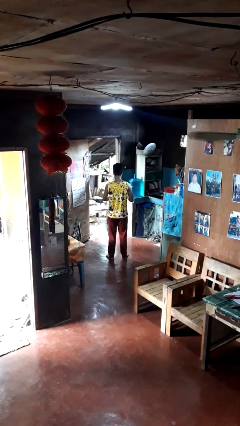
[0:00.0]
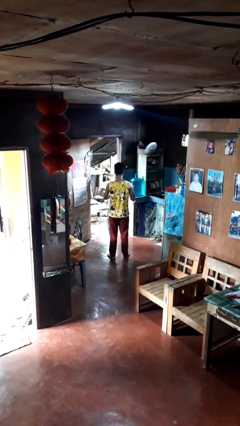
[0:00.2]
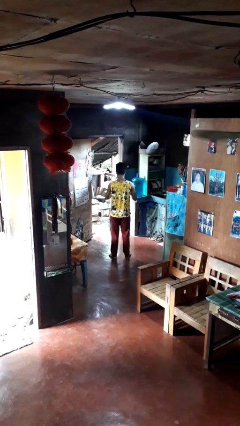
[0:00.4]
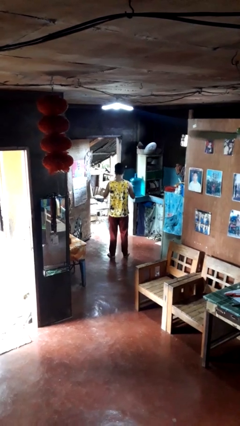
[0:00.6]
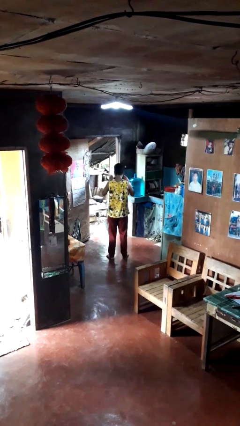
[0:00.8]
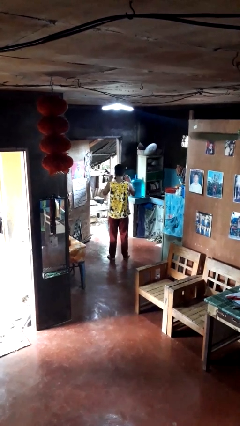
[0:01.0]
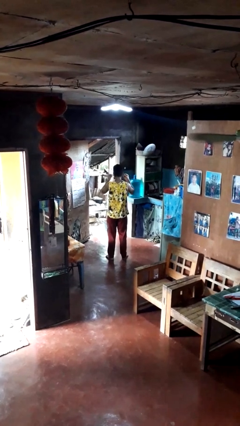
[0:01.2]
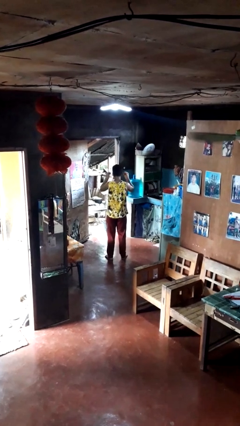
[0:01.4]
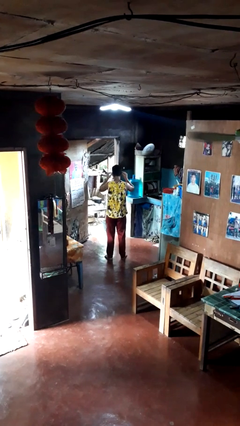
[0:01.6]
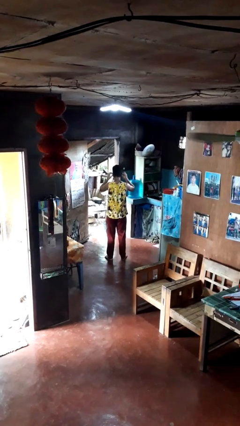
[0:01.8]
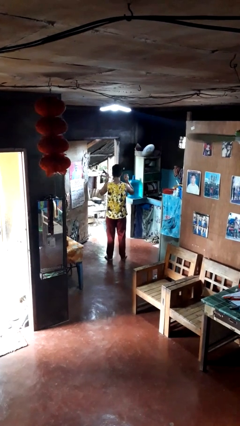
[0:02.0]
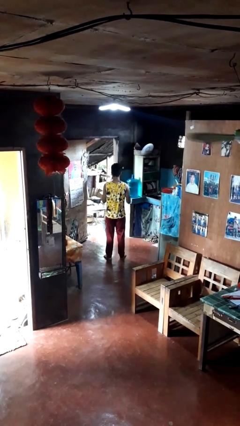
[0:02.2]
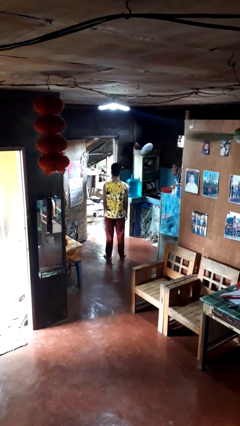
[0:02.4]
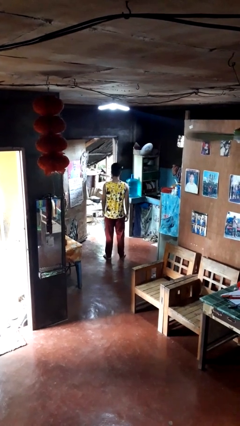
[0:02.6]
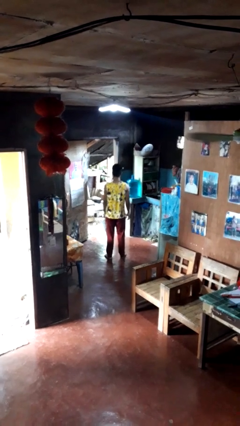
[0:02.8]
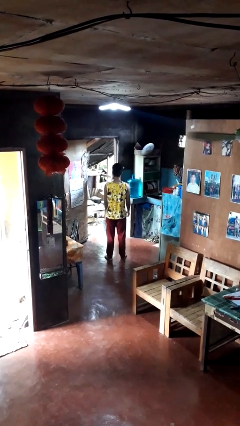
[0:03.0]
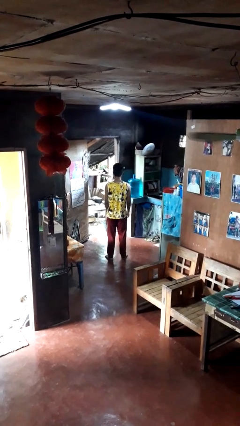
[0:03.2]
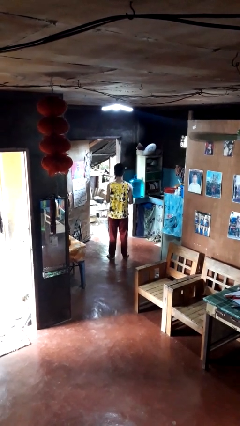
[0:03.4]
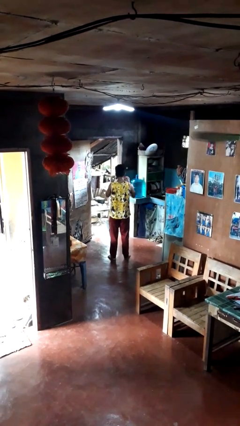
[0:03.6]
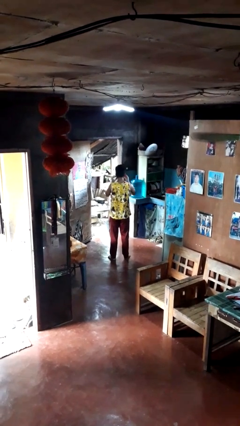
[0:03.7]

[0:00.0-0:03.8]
person puts on facemask

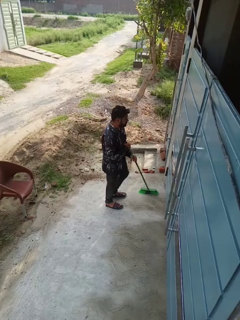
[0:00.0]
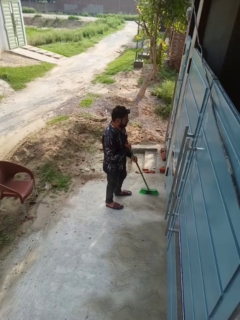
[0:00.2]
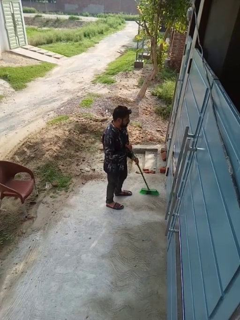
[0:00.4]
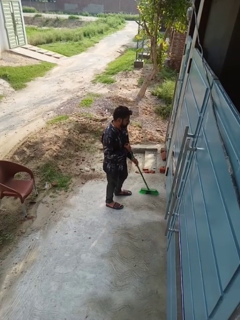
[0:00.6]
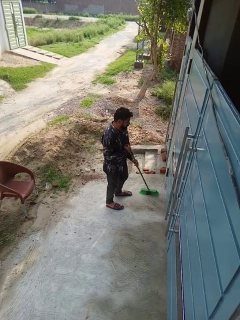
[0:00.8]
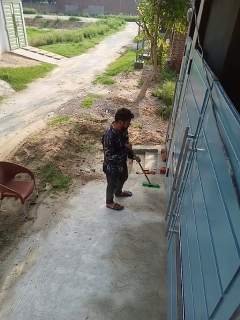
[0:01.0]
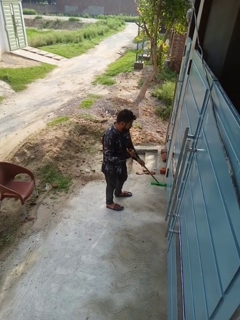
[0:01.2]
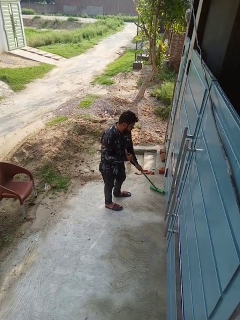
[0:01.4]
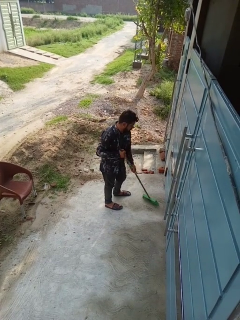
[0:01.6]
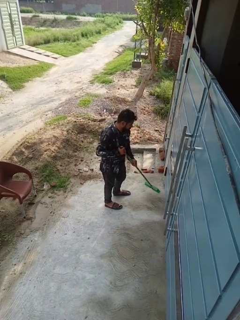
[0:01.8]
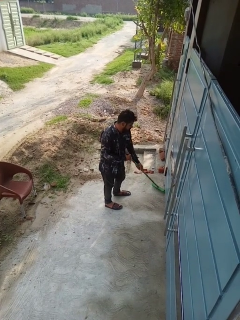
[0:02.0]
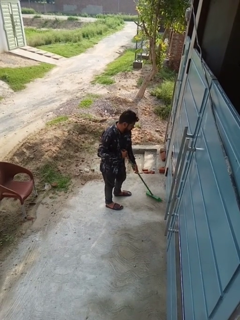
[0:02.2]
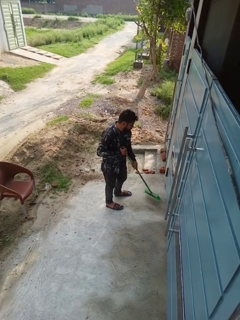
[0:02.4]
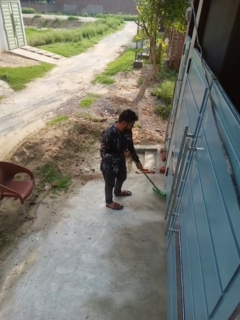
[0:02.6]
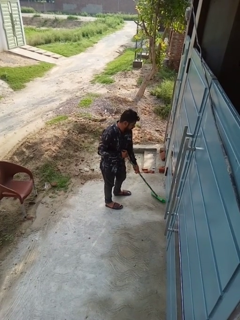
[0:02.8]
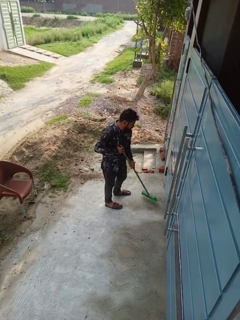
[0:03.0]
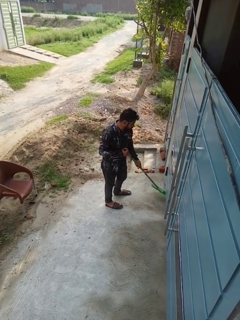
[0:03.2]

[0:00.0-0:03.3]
person sweeps floor

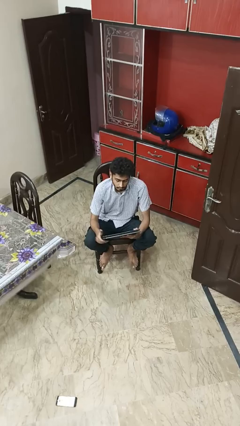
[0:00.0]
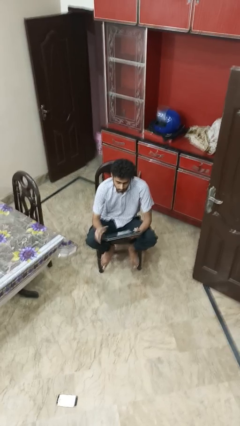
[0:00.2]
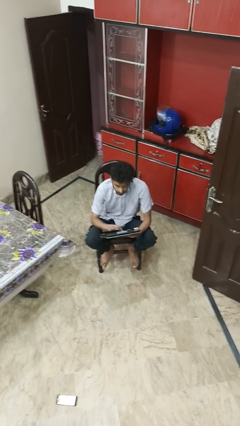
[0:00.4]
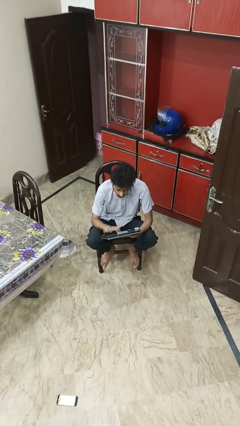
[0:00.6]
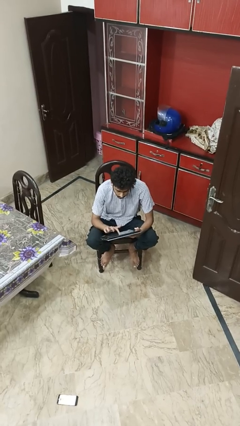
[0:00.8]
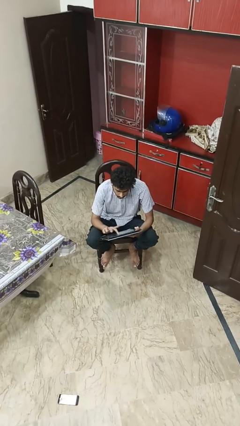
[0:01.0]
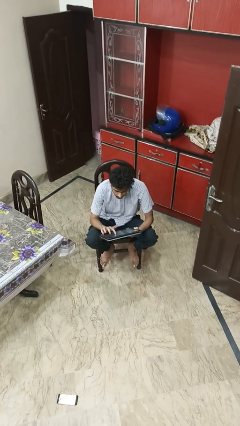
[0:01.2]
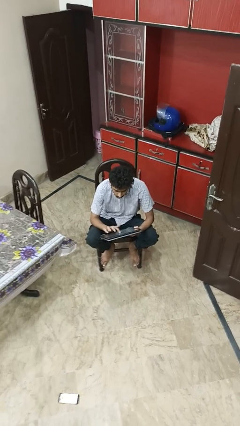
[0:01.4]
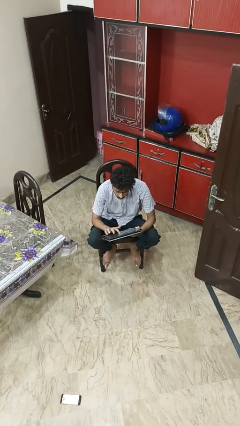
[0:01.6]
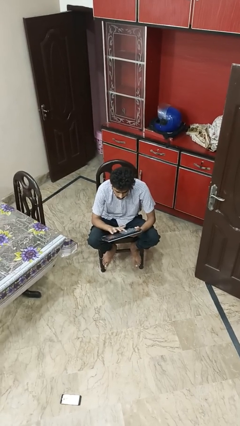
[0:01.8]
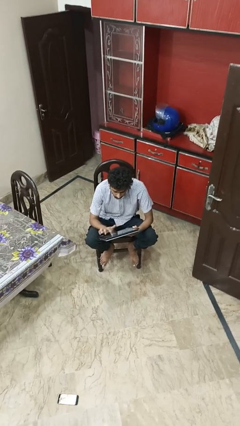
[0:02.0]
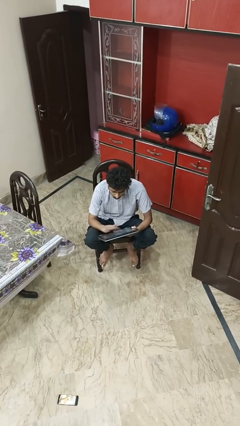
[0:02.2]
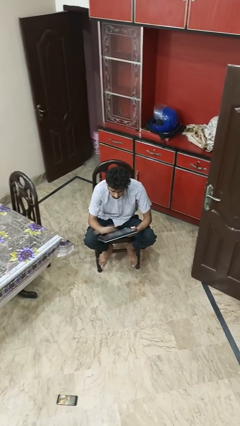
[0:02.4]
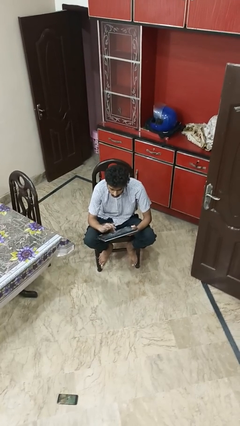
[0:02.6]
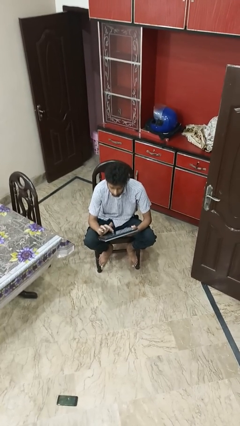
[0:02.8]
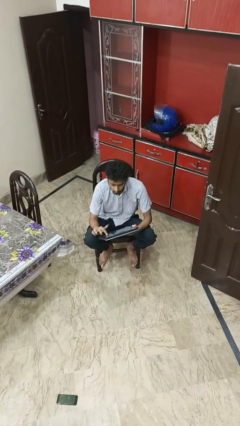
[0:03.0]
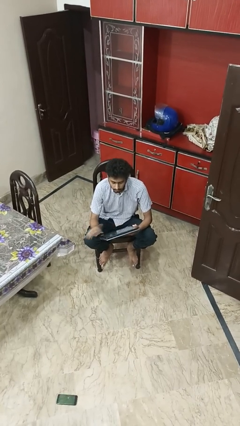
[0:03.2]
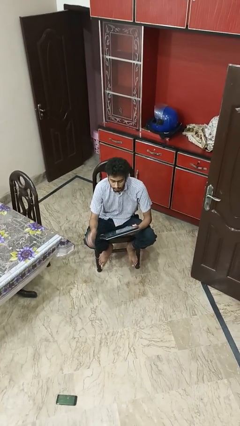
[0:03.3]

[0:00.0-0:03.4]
person interacts with tablet

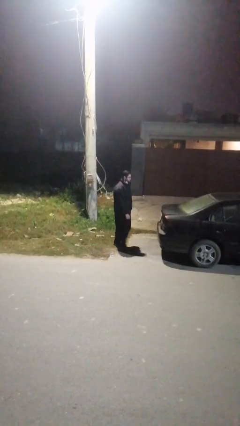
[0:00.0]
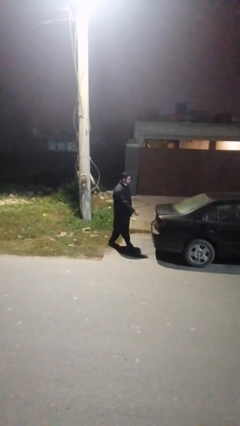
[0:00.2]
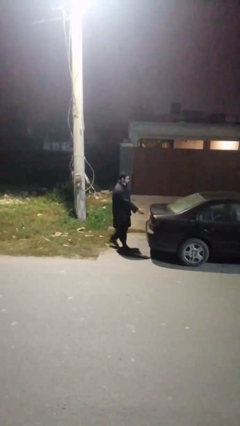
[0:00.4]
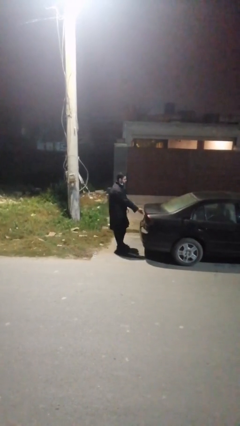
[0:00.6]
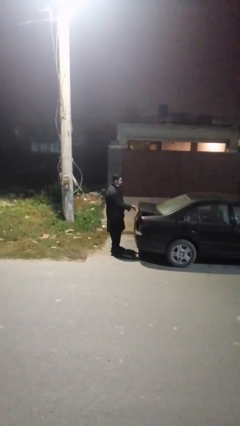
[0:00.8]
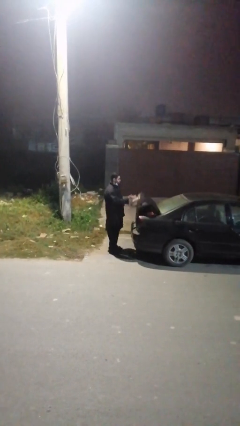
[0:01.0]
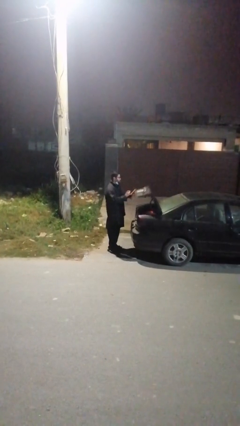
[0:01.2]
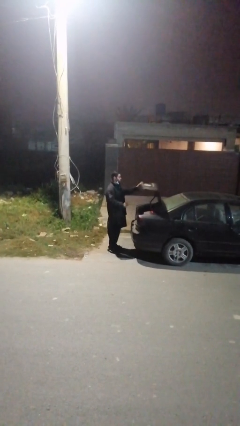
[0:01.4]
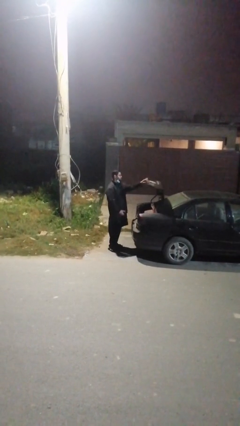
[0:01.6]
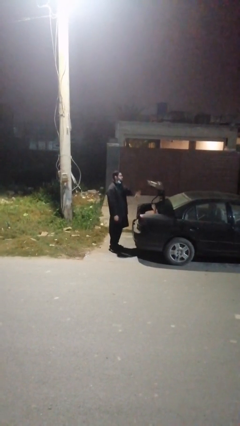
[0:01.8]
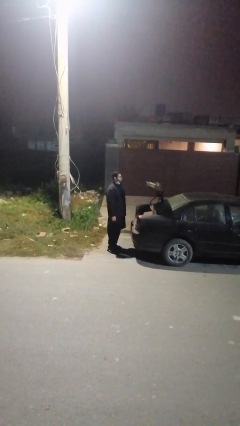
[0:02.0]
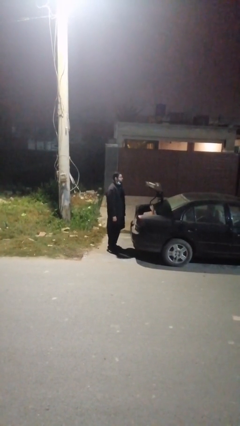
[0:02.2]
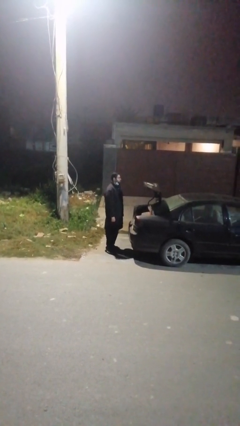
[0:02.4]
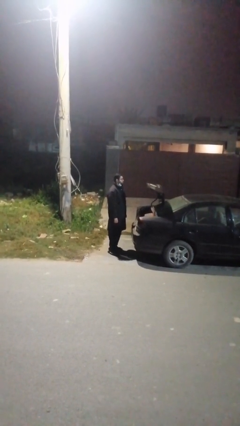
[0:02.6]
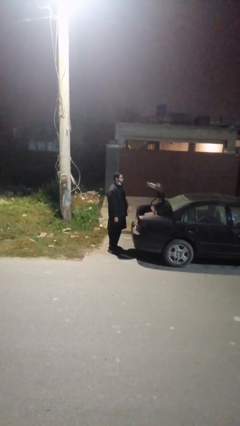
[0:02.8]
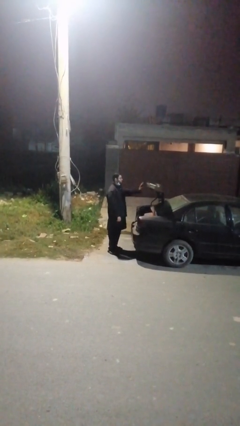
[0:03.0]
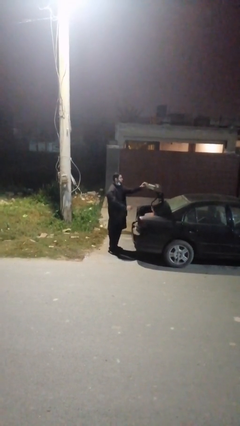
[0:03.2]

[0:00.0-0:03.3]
person opens car trunk

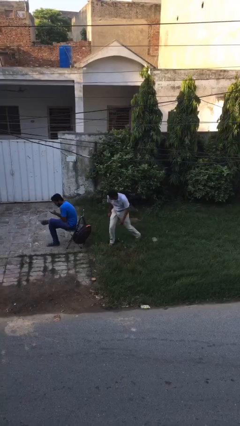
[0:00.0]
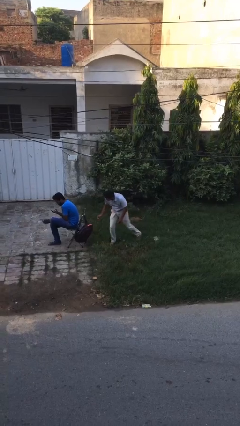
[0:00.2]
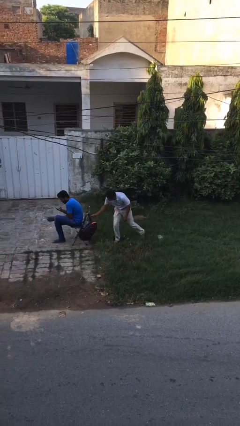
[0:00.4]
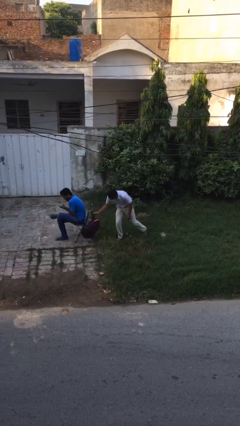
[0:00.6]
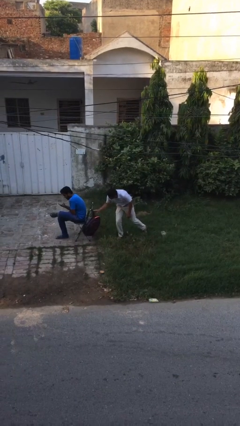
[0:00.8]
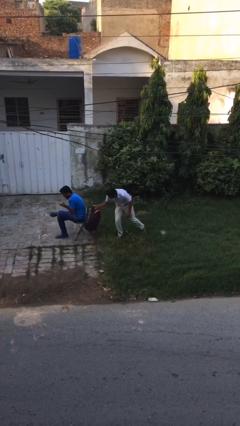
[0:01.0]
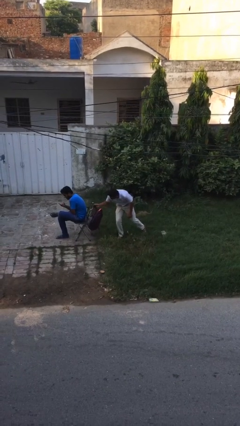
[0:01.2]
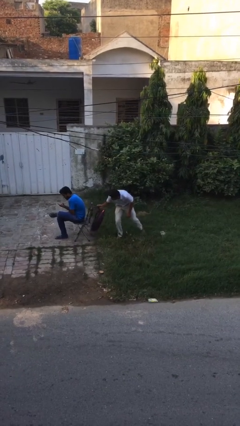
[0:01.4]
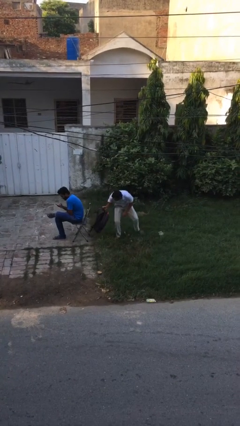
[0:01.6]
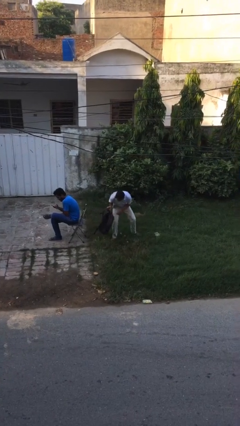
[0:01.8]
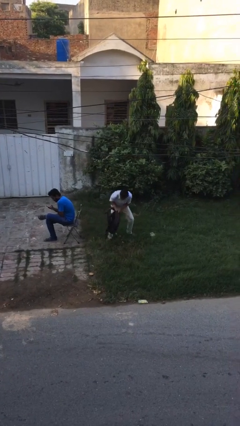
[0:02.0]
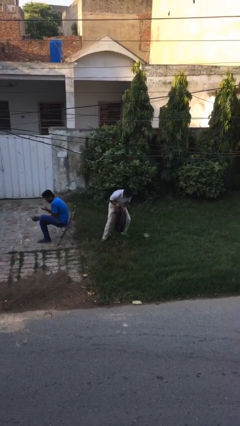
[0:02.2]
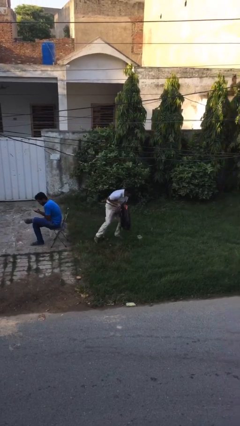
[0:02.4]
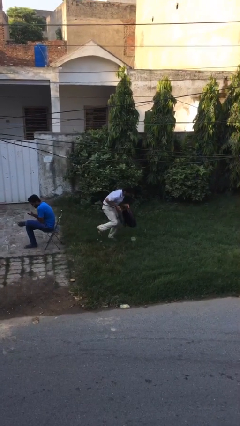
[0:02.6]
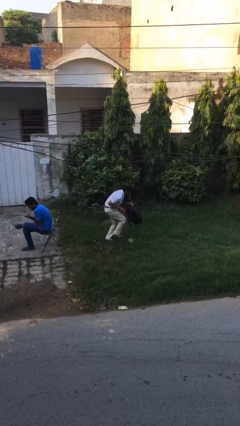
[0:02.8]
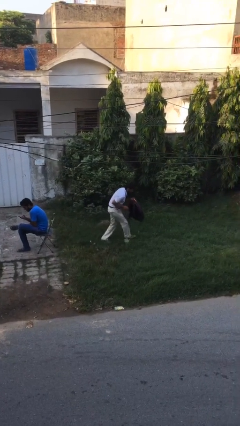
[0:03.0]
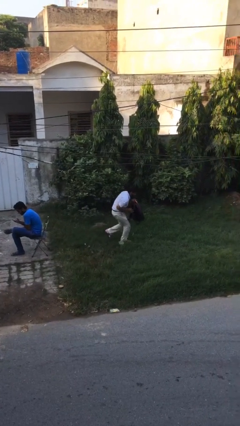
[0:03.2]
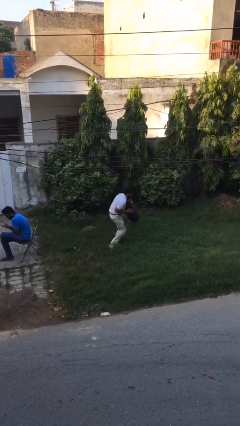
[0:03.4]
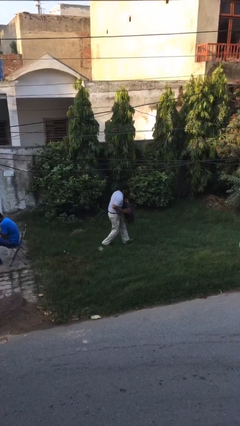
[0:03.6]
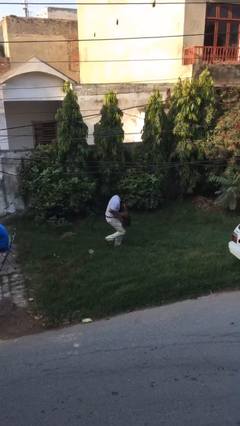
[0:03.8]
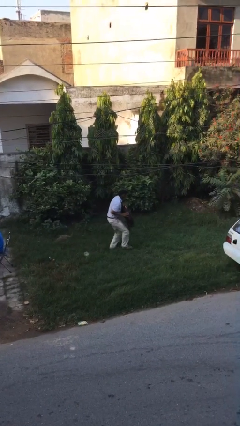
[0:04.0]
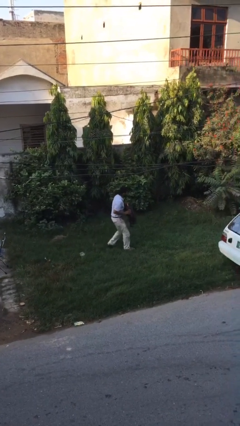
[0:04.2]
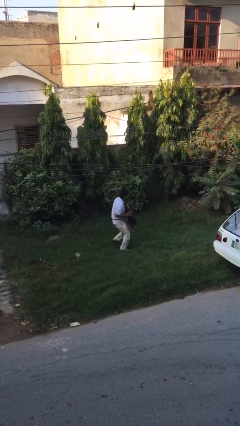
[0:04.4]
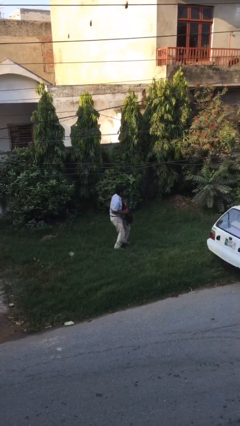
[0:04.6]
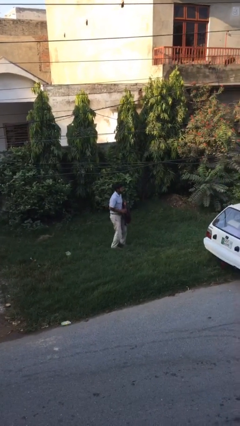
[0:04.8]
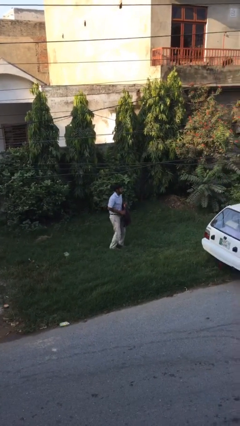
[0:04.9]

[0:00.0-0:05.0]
person steals object from person
